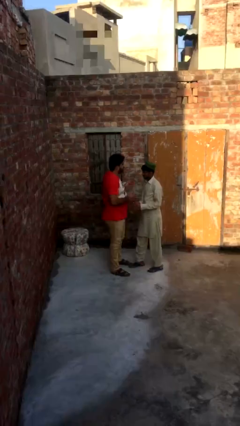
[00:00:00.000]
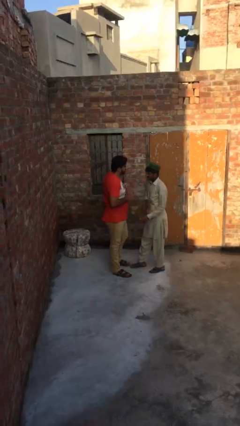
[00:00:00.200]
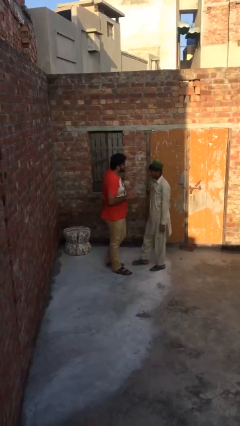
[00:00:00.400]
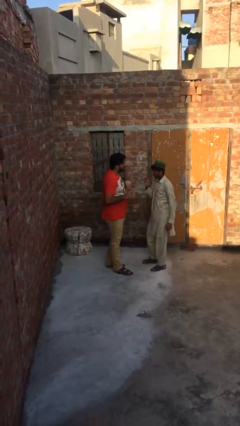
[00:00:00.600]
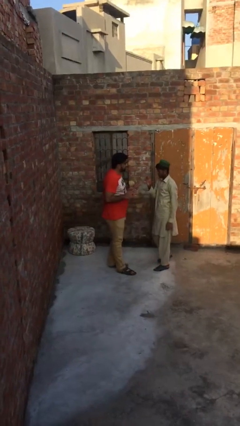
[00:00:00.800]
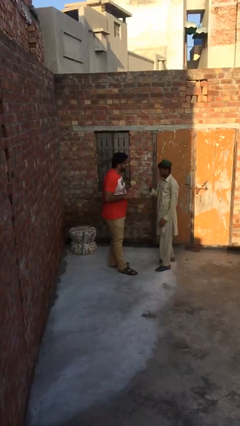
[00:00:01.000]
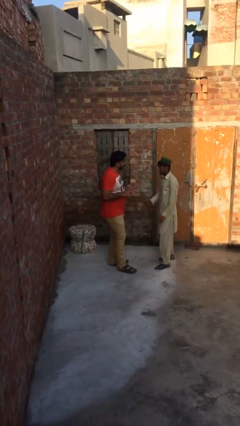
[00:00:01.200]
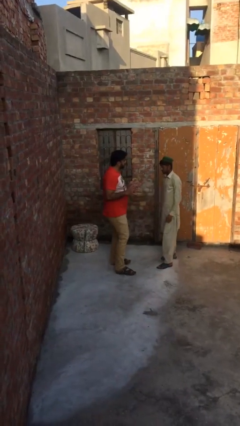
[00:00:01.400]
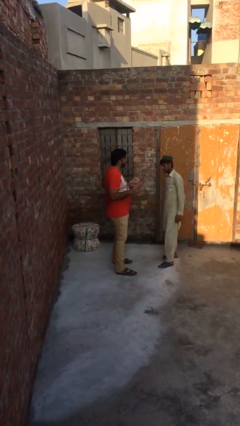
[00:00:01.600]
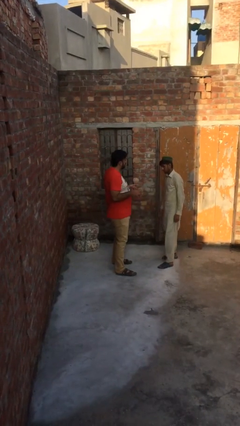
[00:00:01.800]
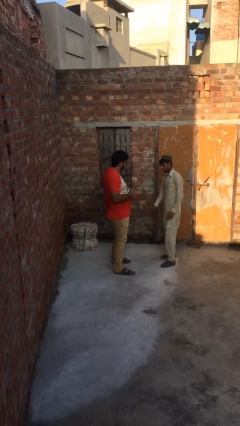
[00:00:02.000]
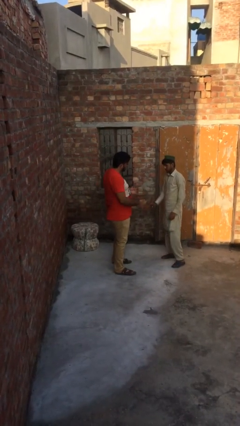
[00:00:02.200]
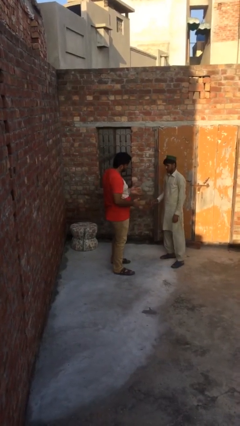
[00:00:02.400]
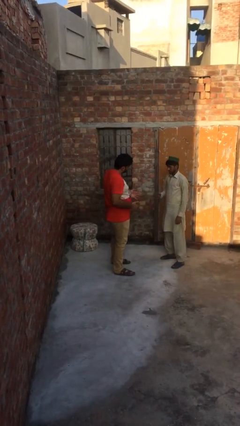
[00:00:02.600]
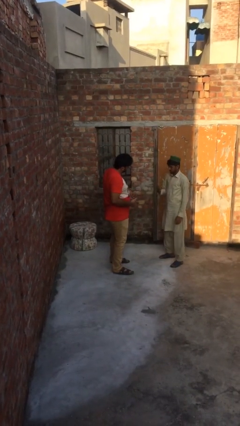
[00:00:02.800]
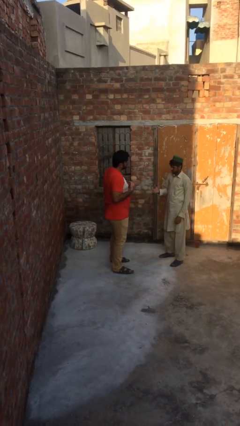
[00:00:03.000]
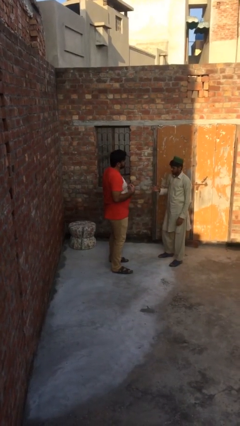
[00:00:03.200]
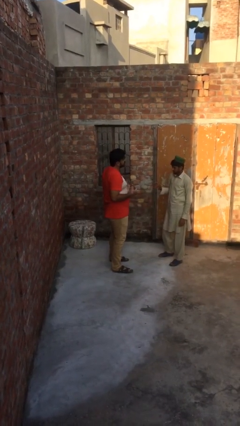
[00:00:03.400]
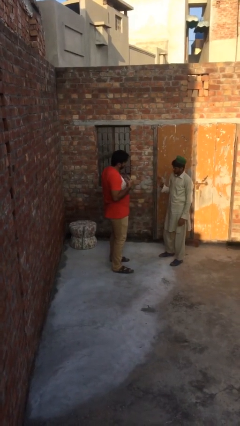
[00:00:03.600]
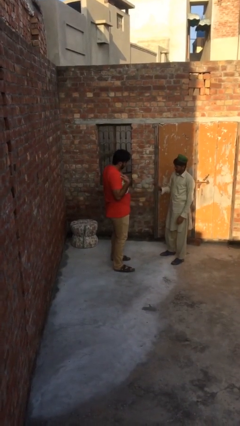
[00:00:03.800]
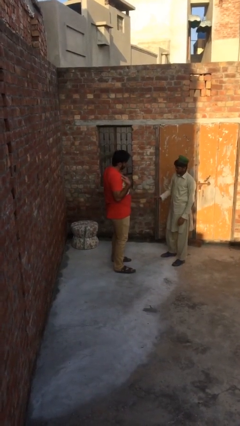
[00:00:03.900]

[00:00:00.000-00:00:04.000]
person talks to person

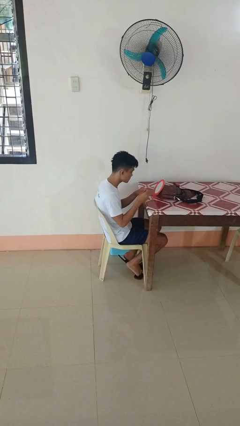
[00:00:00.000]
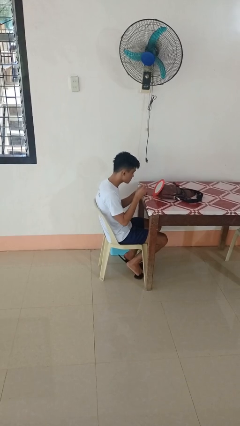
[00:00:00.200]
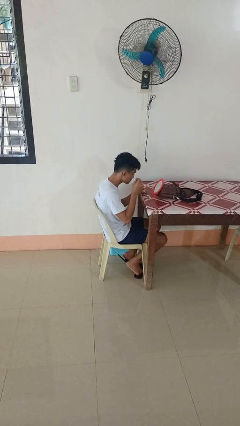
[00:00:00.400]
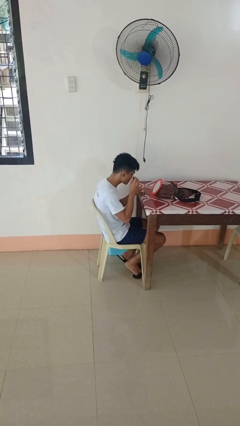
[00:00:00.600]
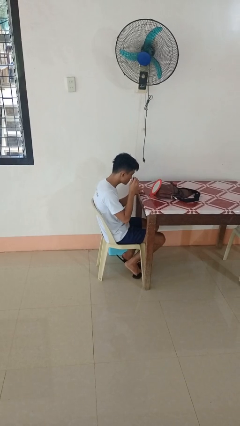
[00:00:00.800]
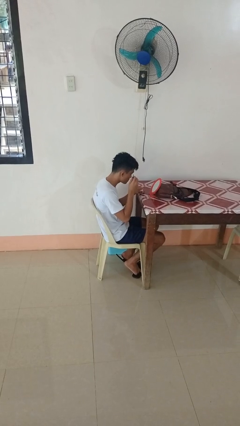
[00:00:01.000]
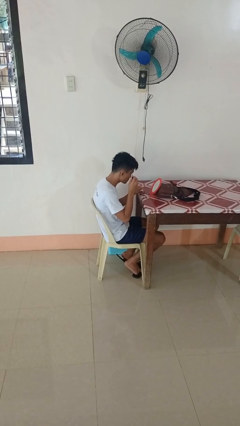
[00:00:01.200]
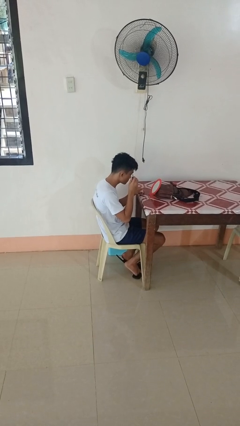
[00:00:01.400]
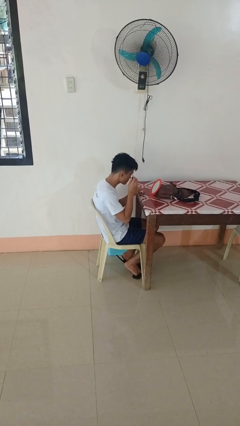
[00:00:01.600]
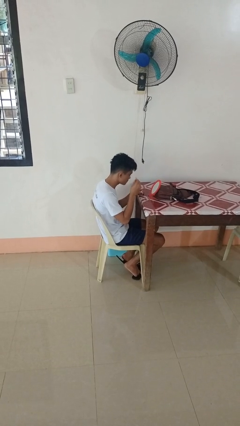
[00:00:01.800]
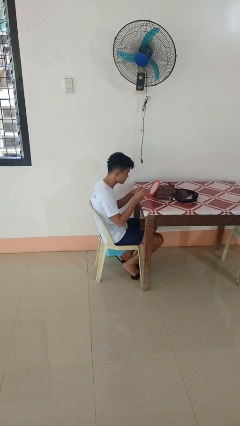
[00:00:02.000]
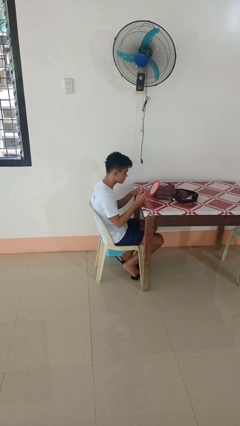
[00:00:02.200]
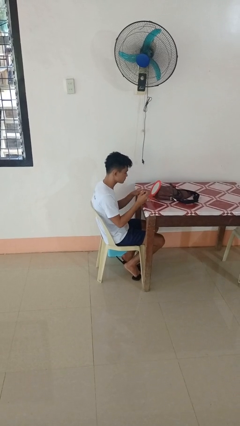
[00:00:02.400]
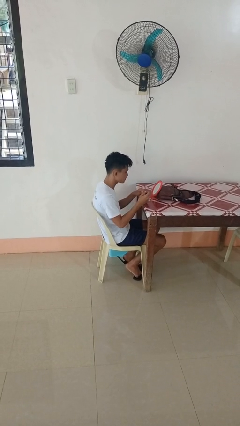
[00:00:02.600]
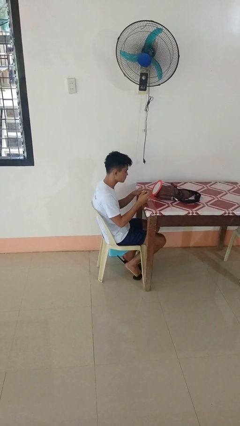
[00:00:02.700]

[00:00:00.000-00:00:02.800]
person applies eye makeup

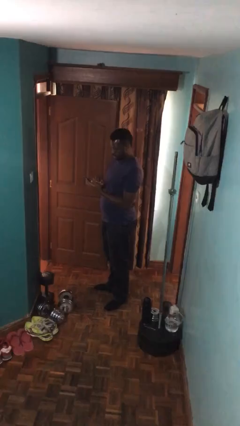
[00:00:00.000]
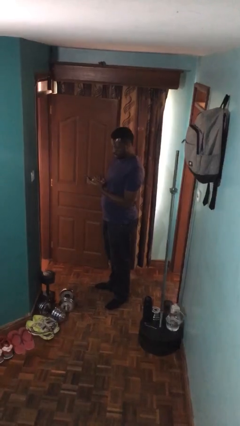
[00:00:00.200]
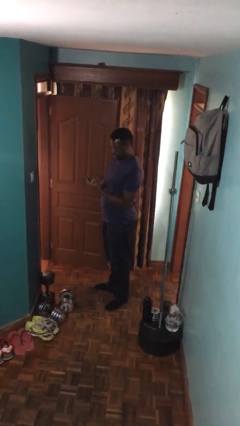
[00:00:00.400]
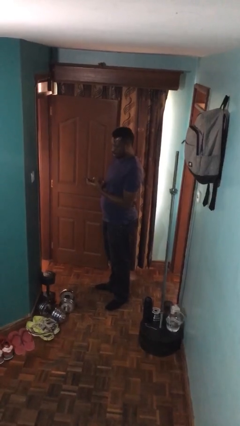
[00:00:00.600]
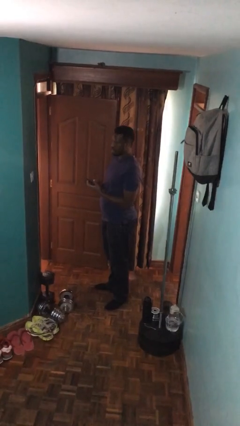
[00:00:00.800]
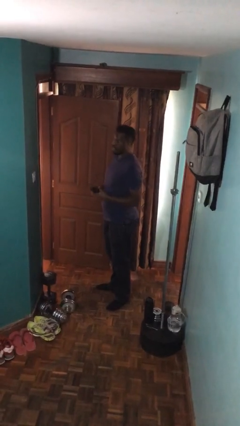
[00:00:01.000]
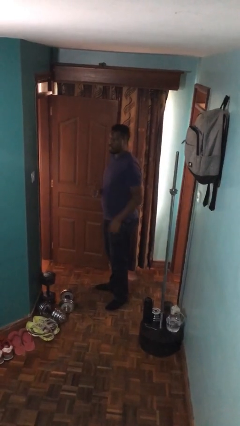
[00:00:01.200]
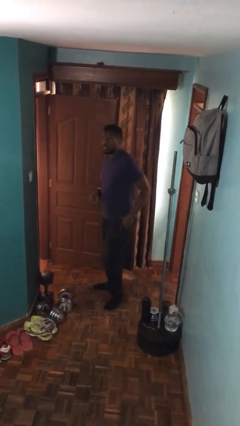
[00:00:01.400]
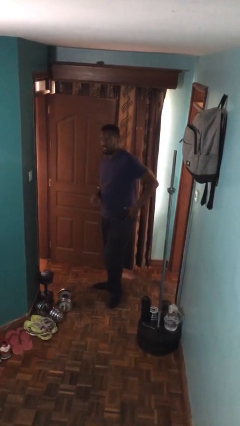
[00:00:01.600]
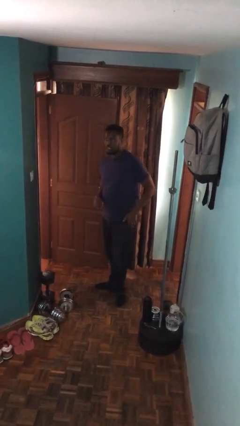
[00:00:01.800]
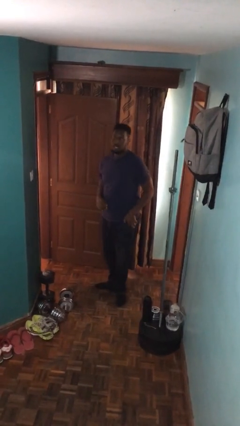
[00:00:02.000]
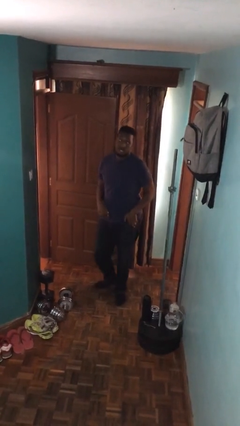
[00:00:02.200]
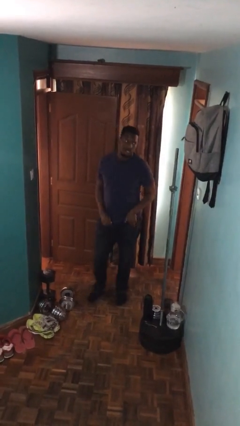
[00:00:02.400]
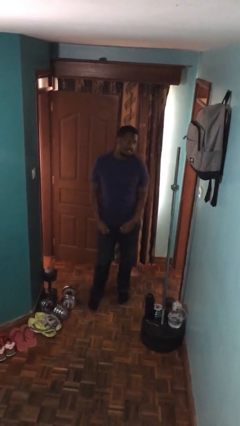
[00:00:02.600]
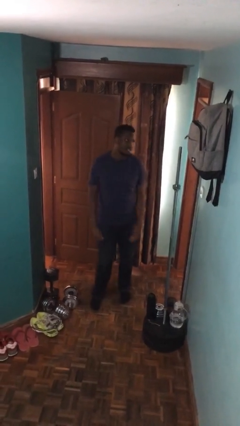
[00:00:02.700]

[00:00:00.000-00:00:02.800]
person puts phone into pocket

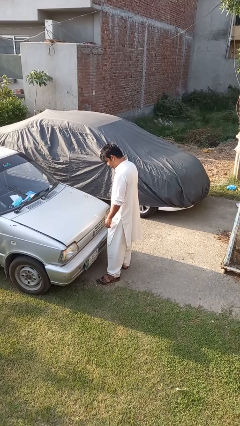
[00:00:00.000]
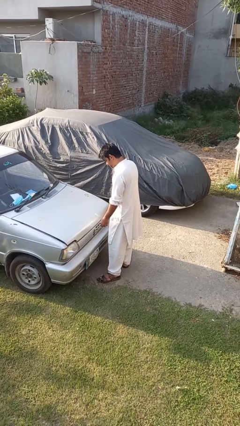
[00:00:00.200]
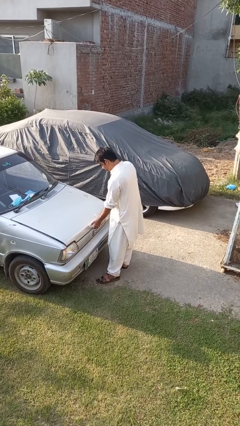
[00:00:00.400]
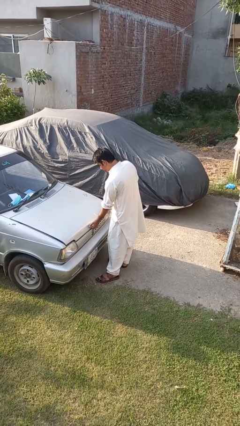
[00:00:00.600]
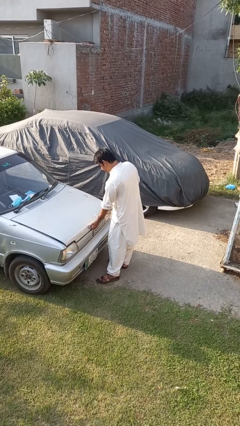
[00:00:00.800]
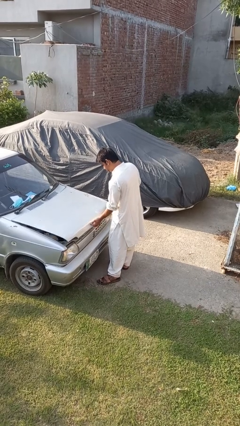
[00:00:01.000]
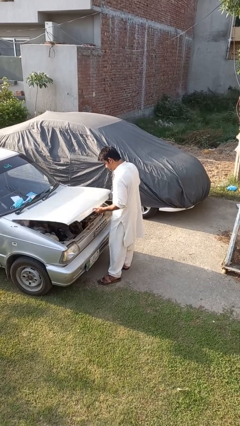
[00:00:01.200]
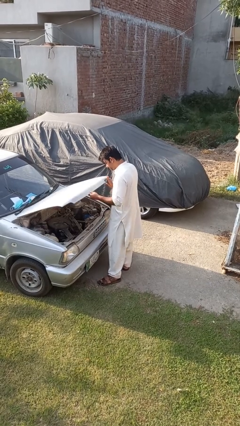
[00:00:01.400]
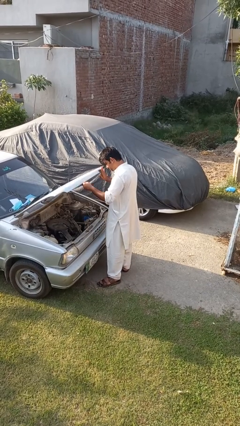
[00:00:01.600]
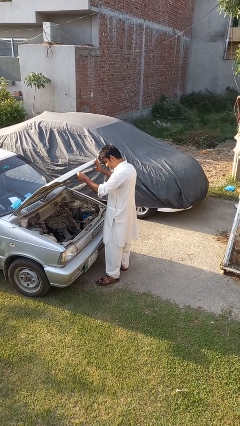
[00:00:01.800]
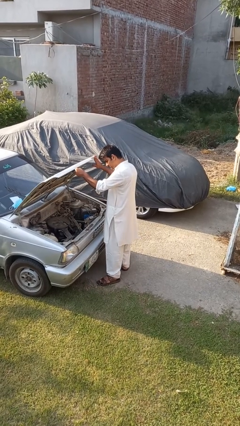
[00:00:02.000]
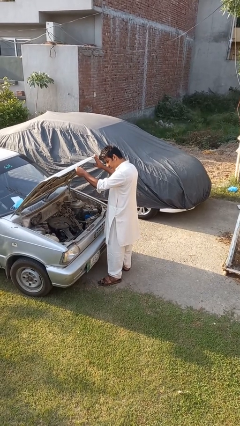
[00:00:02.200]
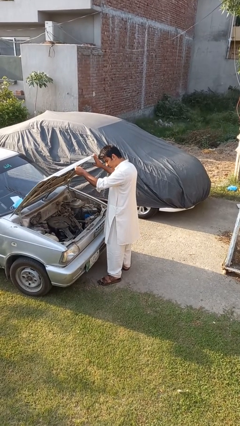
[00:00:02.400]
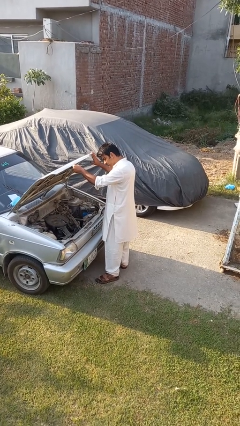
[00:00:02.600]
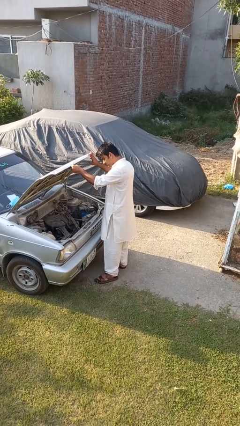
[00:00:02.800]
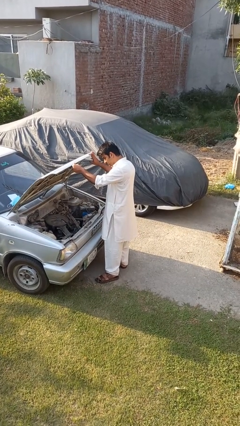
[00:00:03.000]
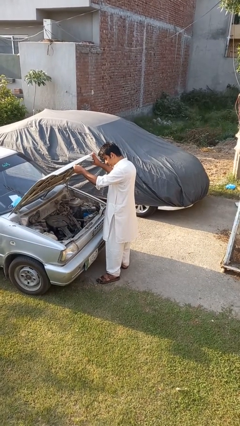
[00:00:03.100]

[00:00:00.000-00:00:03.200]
person opens car hood

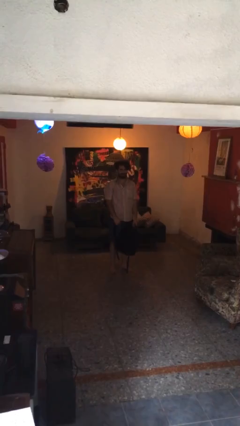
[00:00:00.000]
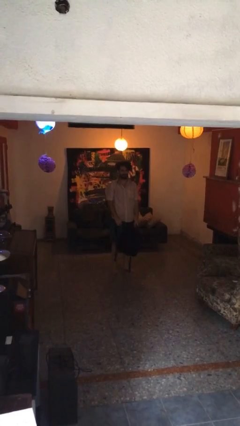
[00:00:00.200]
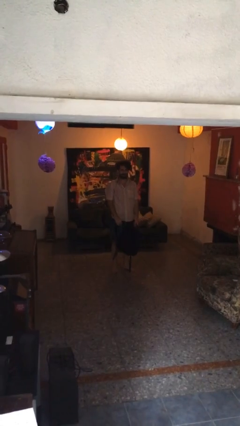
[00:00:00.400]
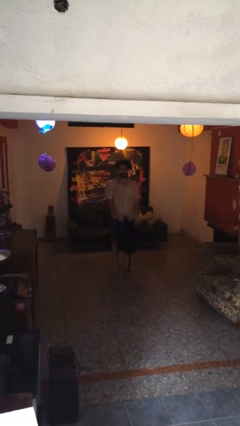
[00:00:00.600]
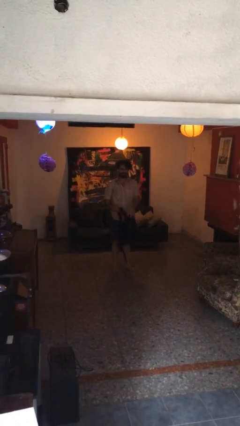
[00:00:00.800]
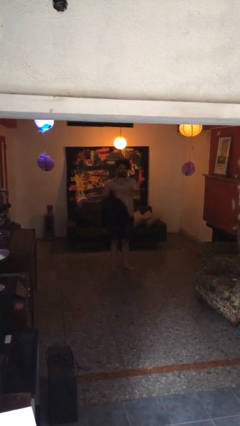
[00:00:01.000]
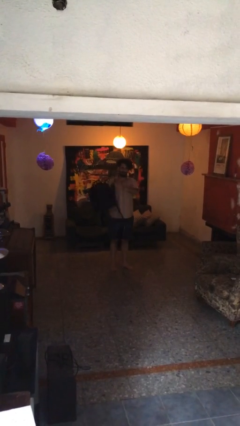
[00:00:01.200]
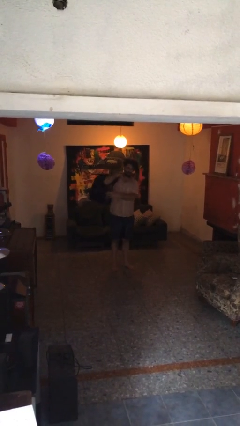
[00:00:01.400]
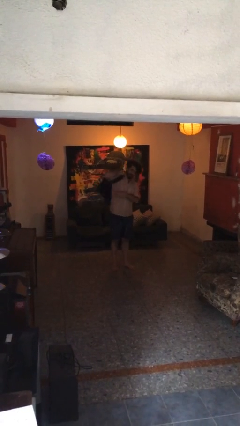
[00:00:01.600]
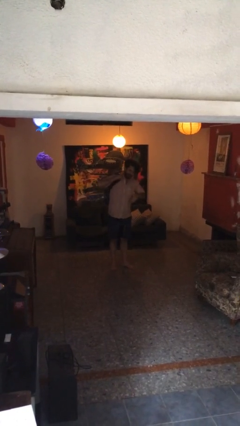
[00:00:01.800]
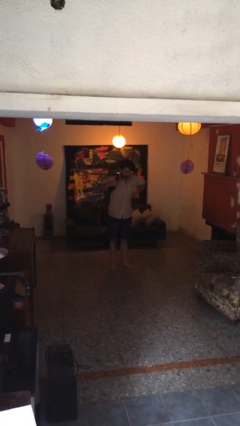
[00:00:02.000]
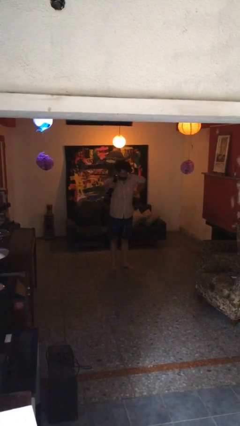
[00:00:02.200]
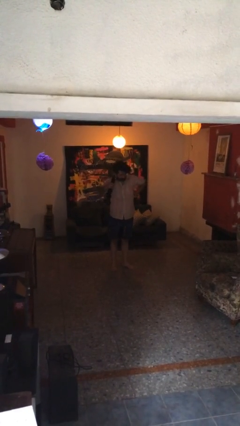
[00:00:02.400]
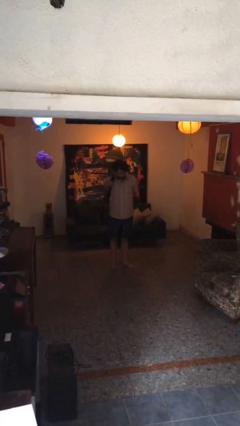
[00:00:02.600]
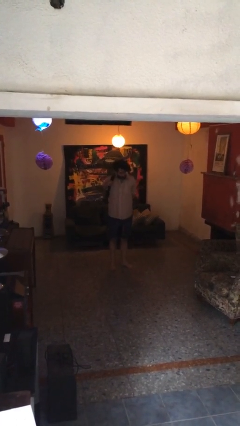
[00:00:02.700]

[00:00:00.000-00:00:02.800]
person puts on backpack

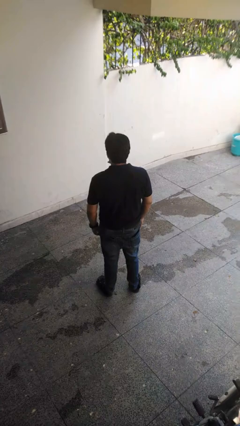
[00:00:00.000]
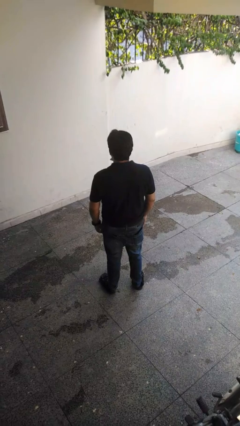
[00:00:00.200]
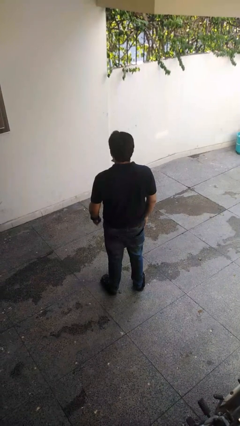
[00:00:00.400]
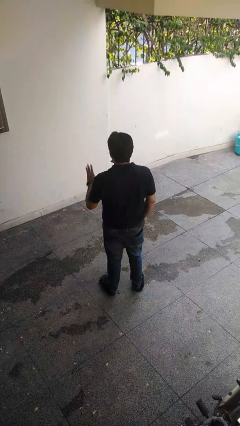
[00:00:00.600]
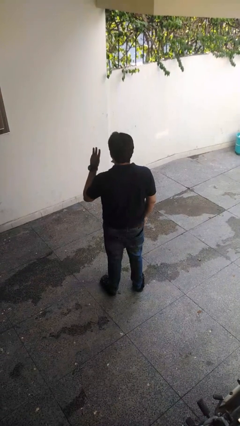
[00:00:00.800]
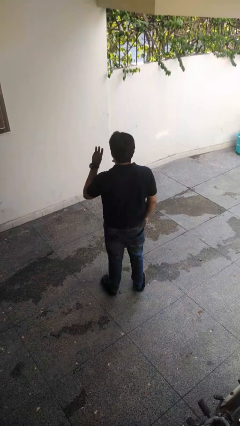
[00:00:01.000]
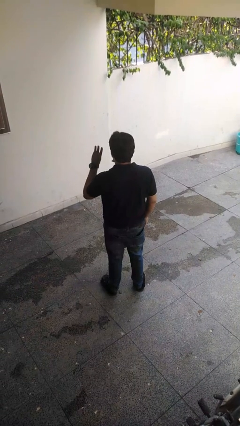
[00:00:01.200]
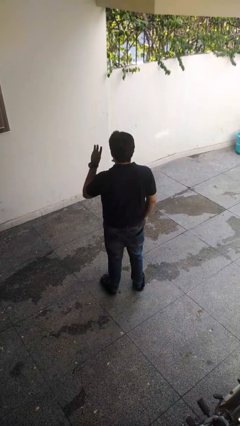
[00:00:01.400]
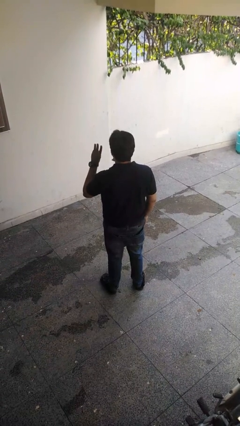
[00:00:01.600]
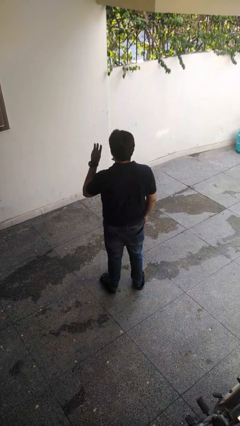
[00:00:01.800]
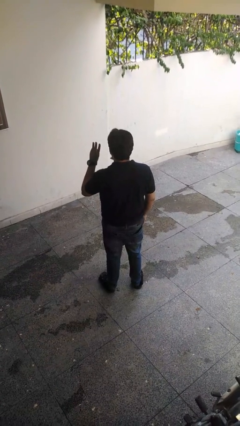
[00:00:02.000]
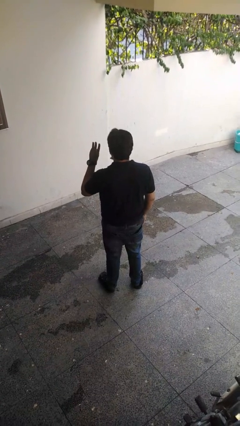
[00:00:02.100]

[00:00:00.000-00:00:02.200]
person gestures number three
